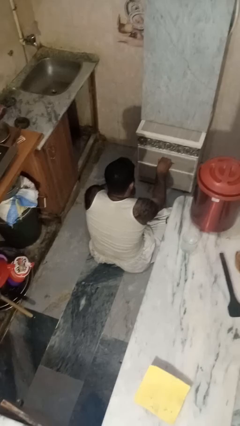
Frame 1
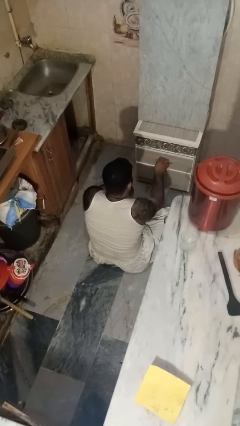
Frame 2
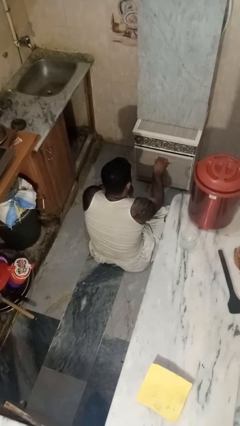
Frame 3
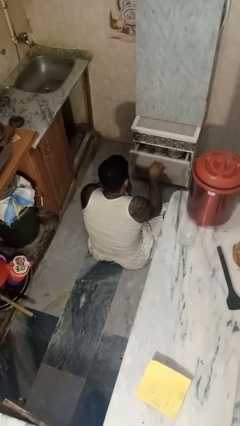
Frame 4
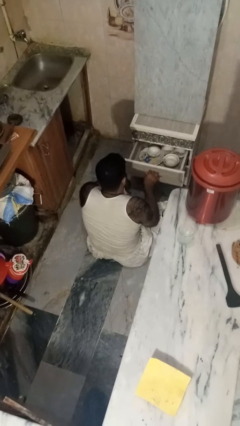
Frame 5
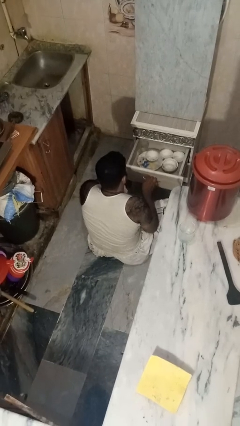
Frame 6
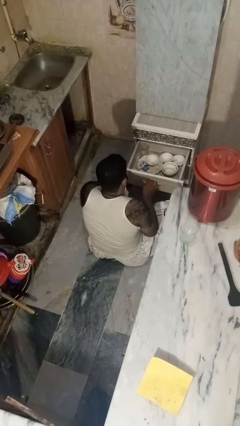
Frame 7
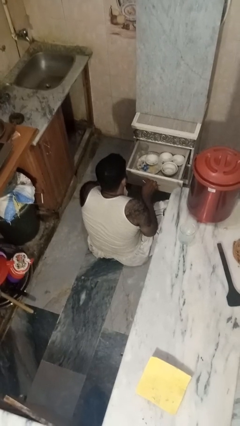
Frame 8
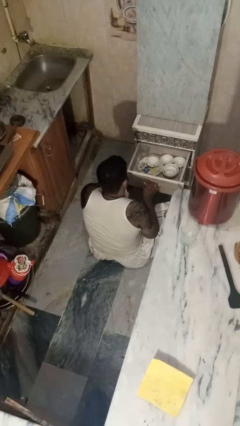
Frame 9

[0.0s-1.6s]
person opens kitchen drawer

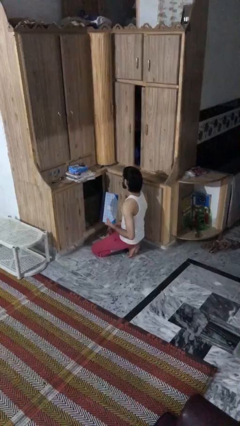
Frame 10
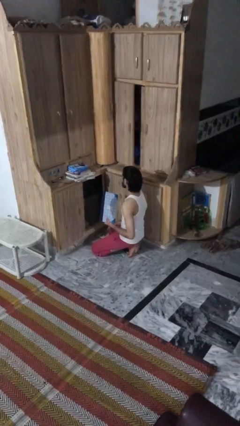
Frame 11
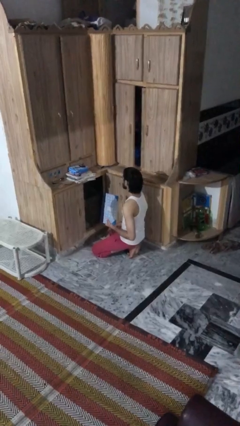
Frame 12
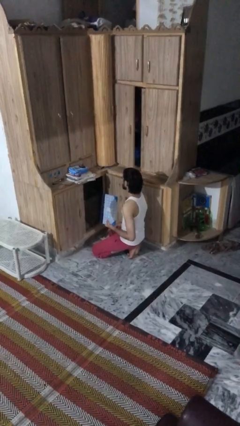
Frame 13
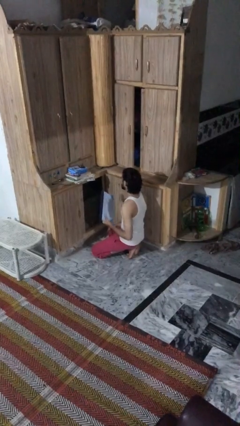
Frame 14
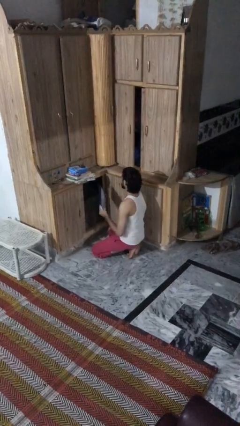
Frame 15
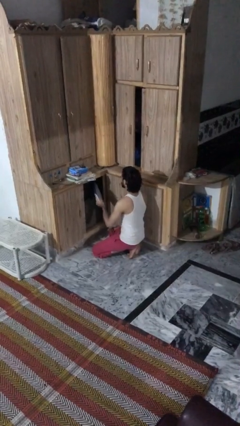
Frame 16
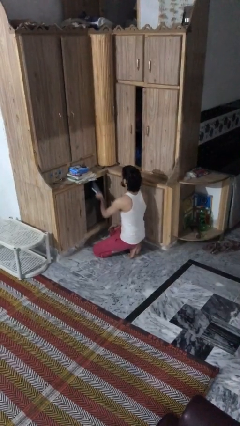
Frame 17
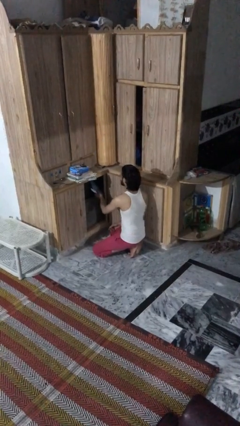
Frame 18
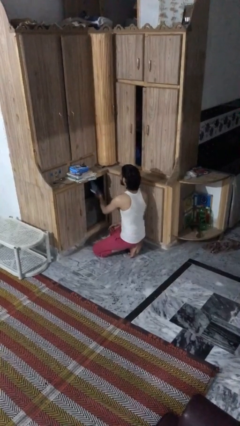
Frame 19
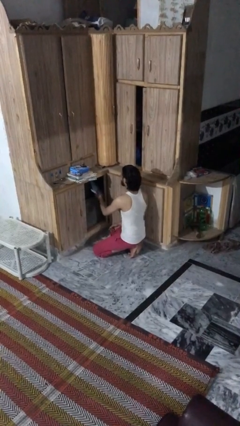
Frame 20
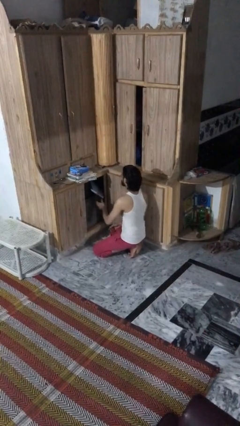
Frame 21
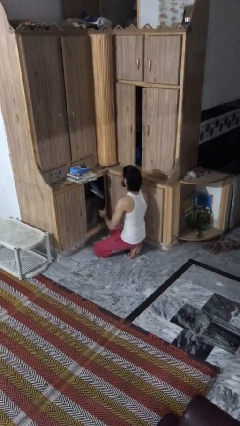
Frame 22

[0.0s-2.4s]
person puts down object into cabinet

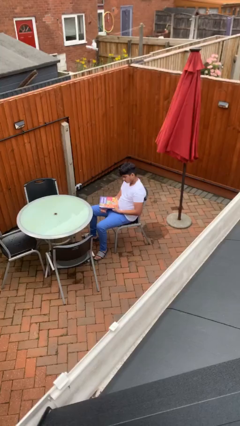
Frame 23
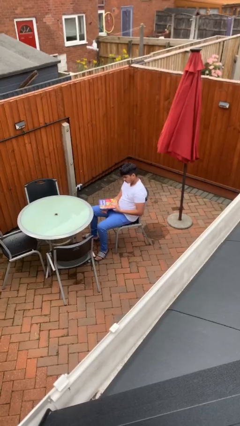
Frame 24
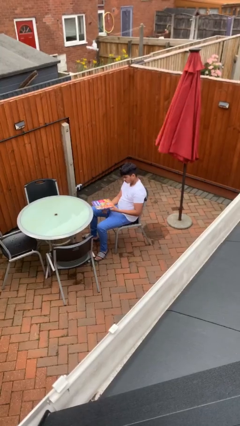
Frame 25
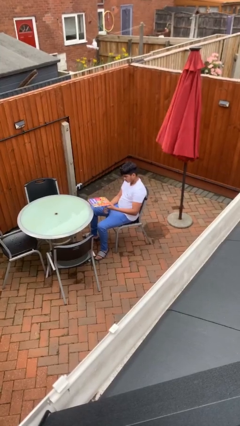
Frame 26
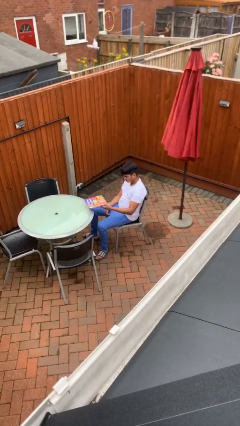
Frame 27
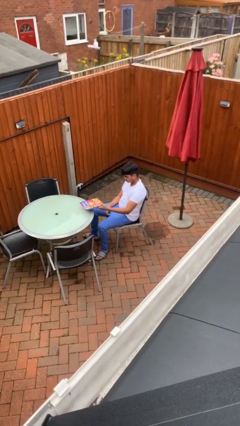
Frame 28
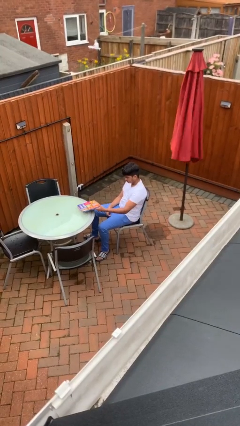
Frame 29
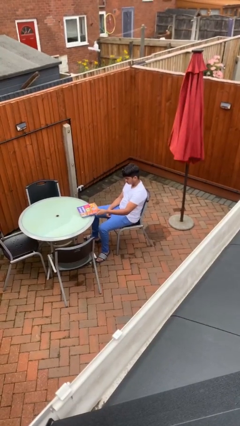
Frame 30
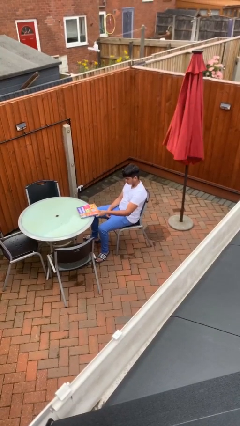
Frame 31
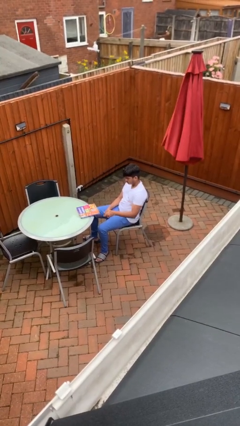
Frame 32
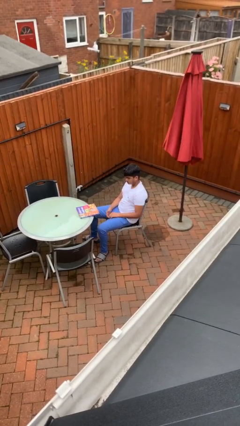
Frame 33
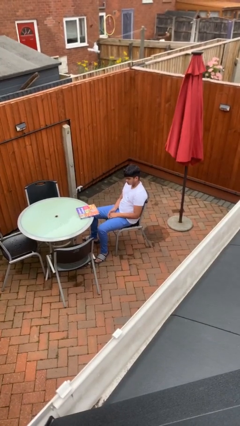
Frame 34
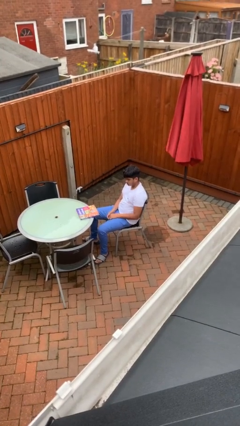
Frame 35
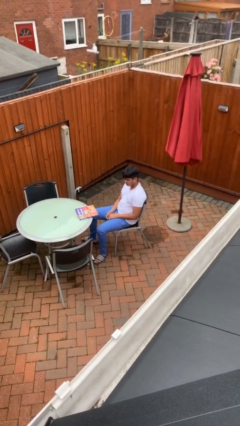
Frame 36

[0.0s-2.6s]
person puts down object on table

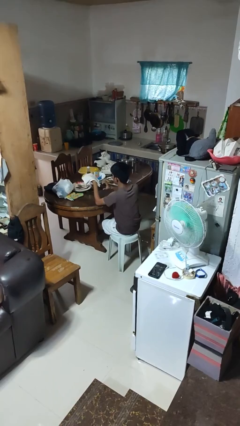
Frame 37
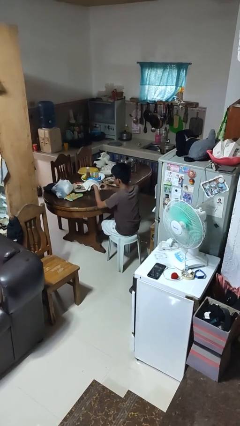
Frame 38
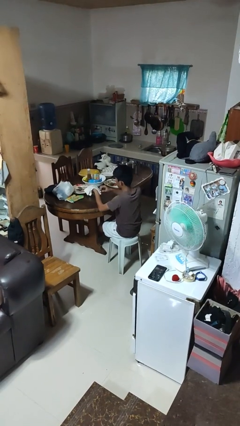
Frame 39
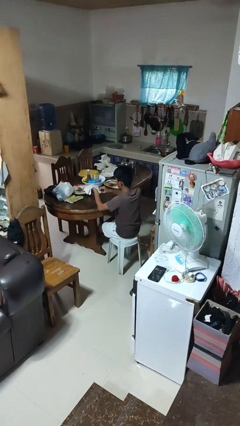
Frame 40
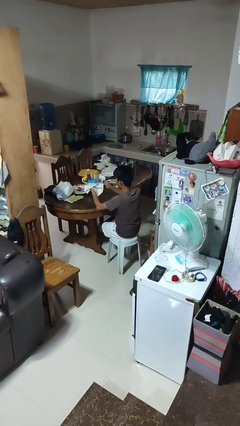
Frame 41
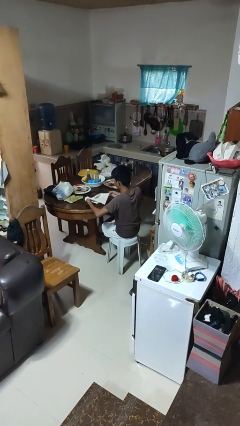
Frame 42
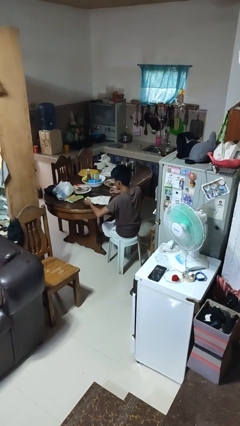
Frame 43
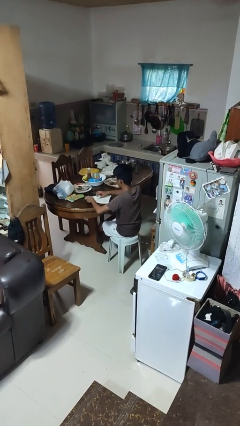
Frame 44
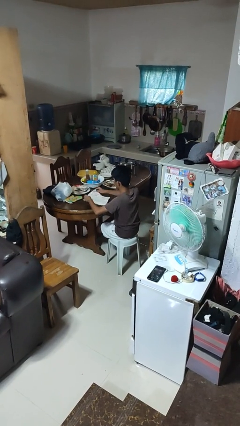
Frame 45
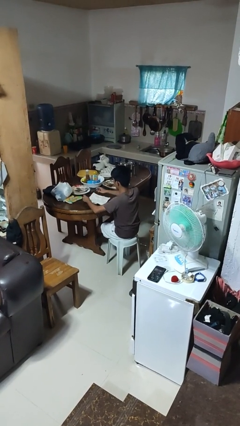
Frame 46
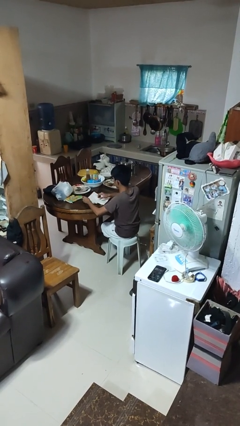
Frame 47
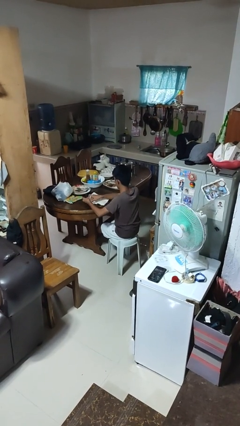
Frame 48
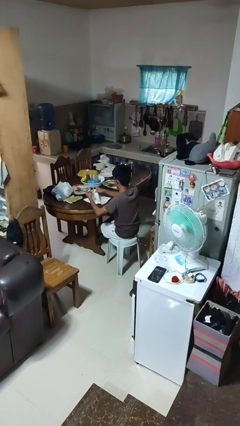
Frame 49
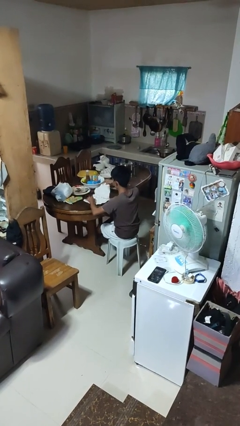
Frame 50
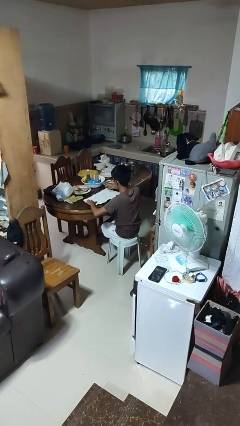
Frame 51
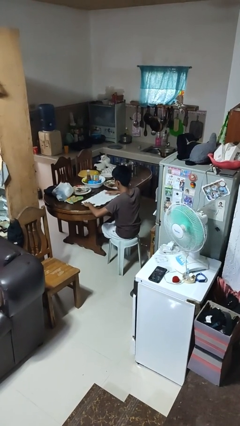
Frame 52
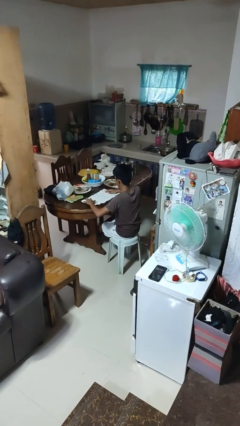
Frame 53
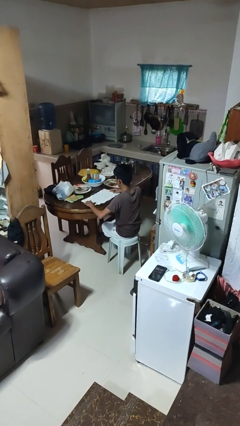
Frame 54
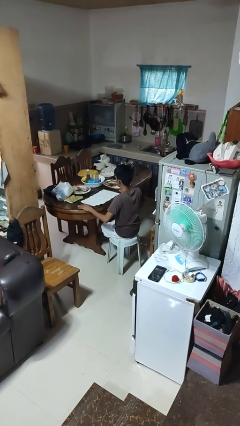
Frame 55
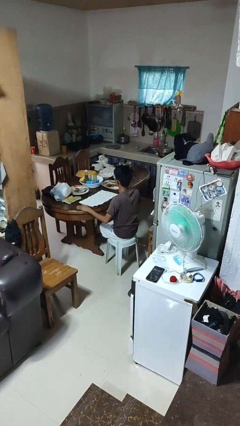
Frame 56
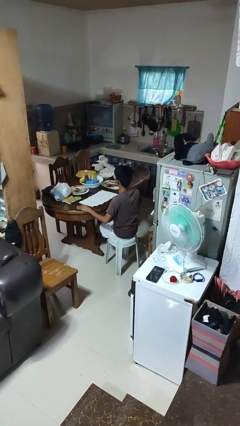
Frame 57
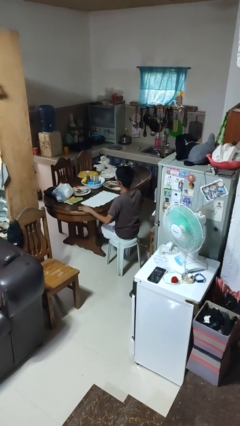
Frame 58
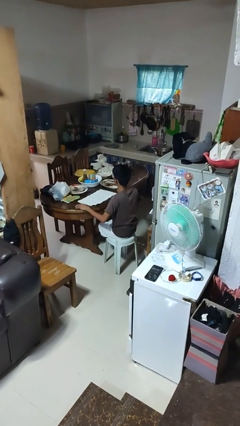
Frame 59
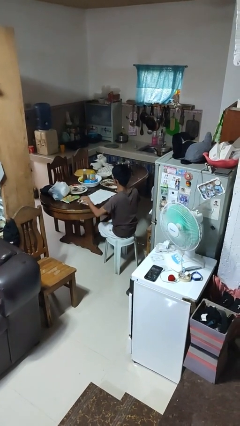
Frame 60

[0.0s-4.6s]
person spreads tablecloth

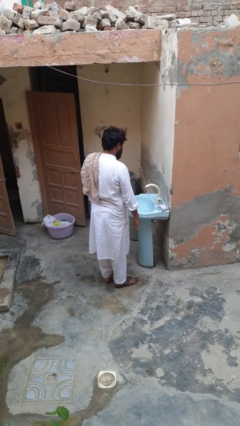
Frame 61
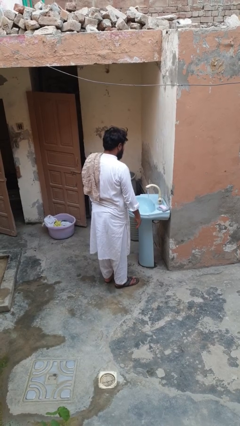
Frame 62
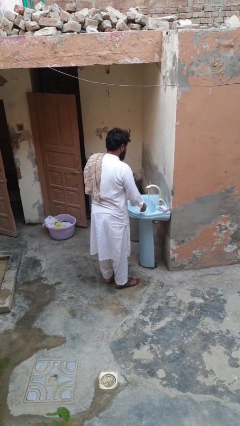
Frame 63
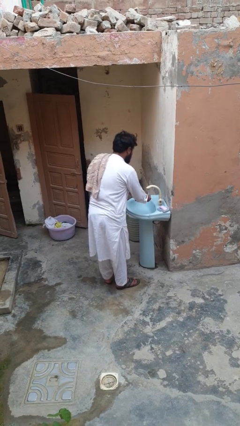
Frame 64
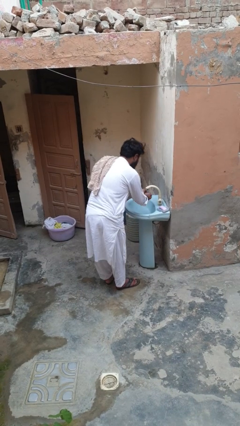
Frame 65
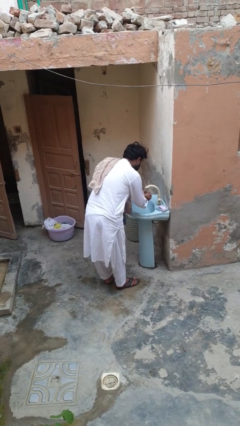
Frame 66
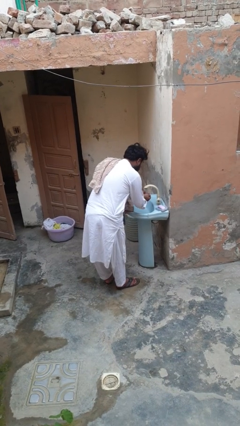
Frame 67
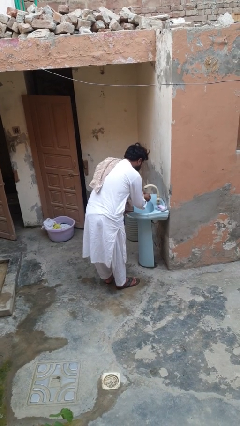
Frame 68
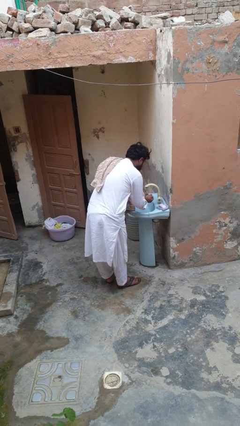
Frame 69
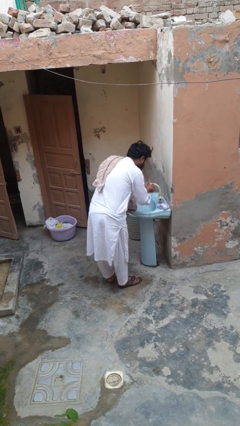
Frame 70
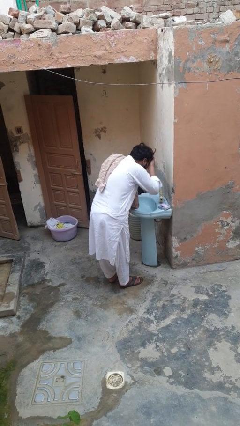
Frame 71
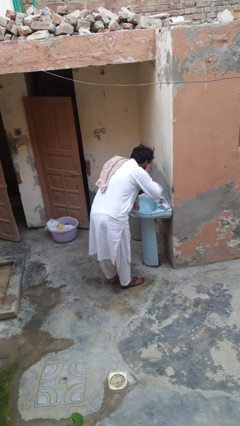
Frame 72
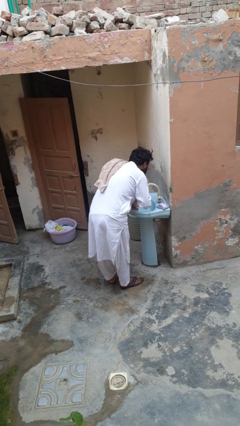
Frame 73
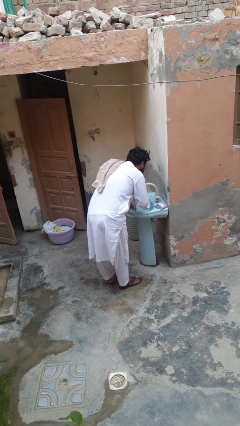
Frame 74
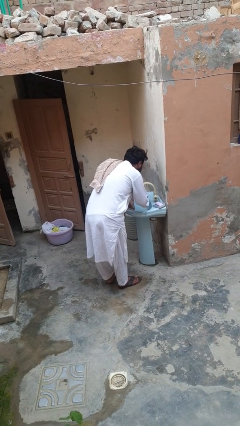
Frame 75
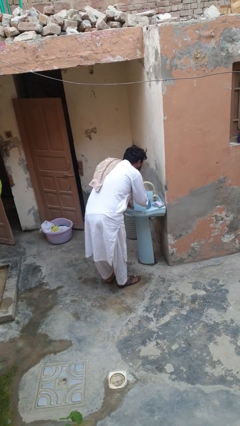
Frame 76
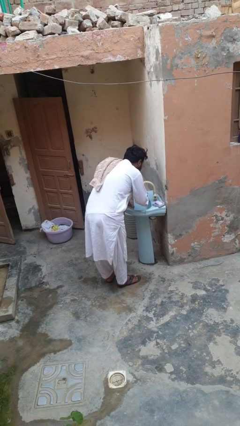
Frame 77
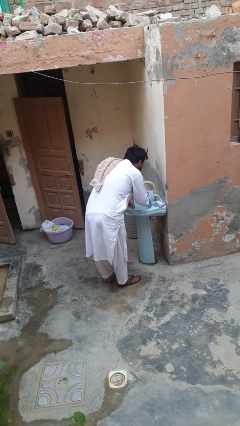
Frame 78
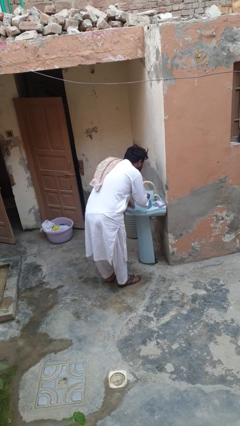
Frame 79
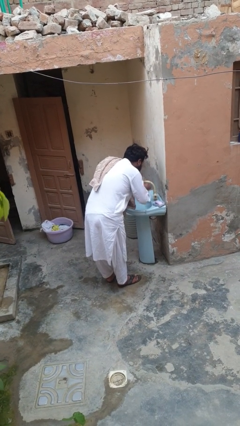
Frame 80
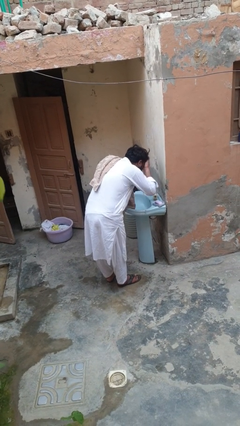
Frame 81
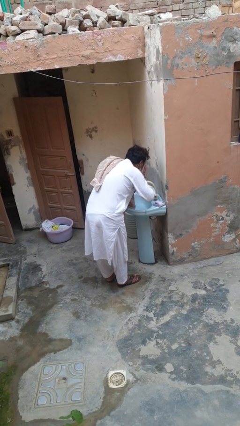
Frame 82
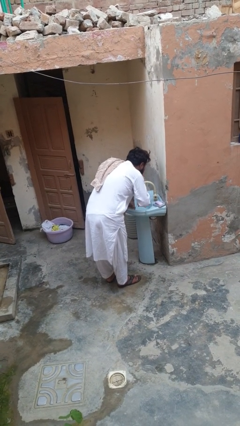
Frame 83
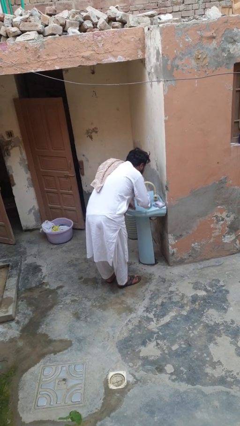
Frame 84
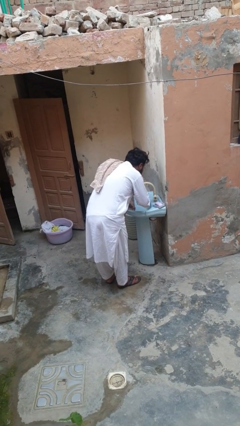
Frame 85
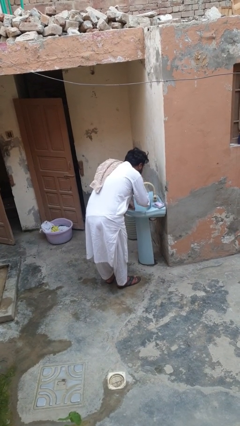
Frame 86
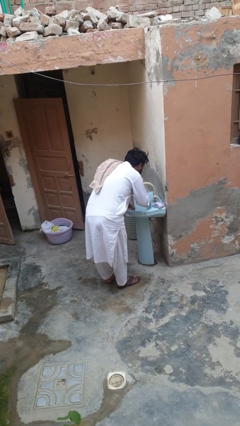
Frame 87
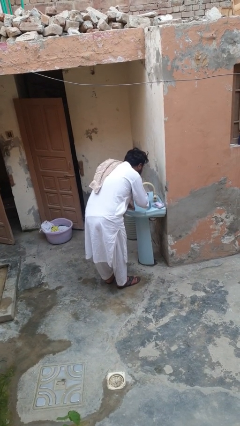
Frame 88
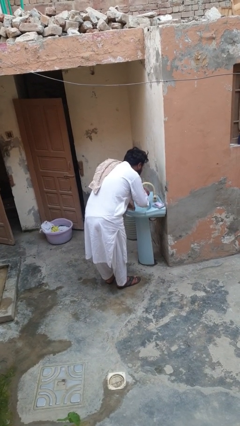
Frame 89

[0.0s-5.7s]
person washes face

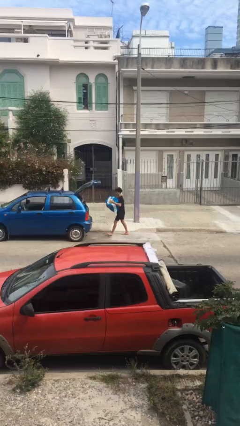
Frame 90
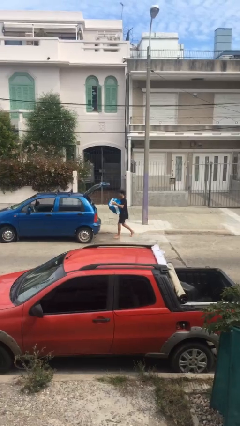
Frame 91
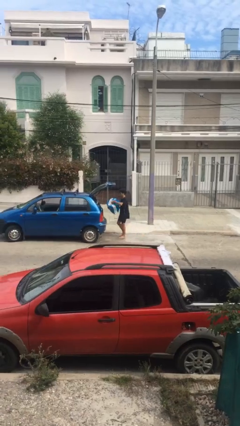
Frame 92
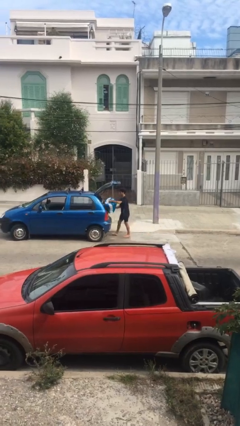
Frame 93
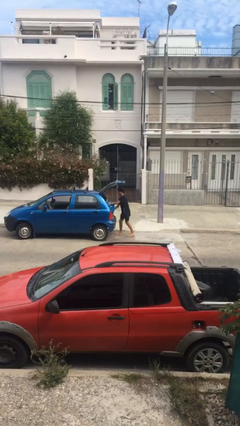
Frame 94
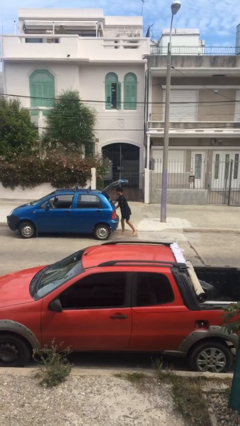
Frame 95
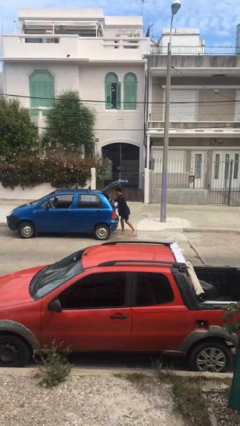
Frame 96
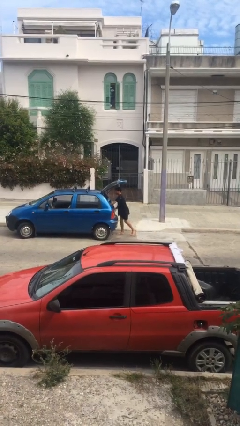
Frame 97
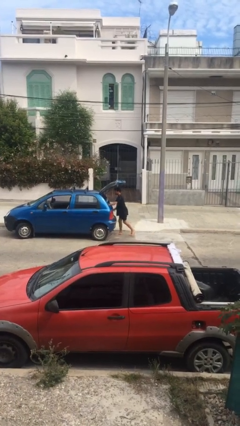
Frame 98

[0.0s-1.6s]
person loads car
